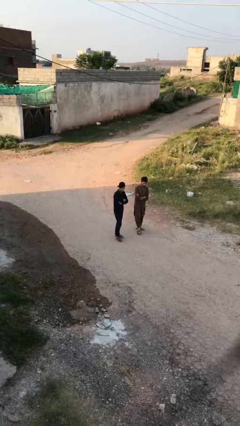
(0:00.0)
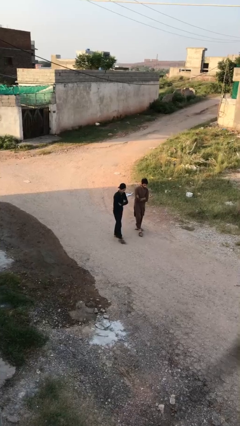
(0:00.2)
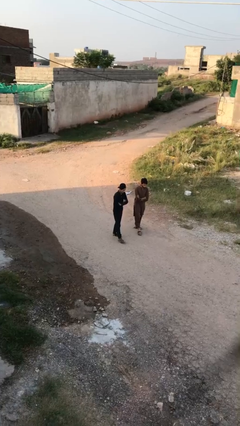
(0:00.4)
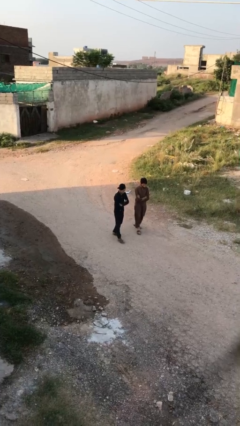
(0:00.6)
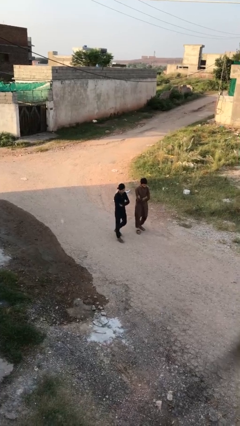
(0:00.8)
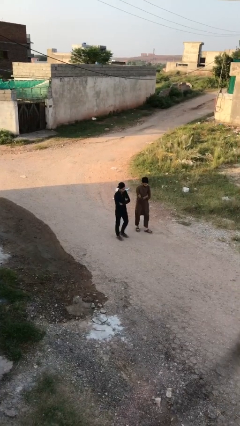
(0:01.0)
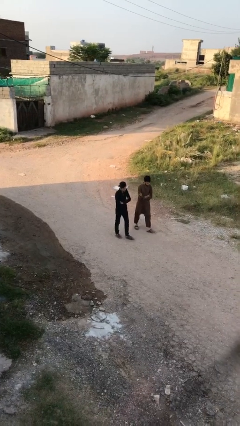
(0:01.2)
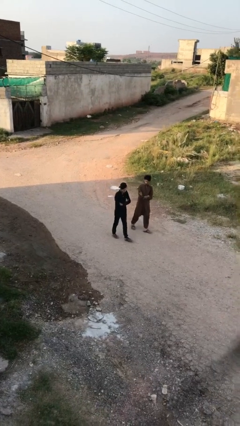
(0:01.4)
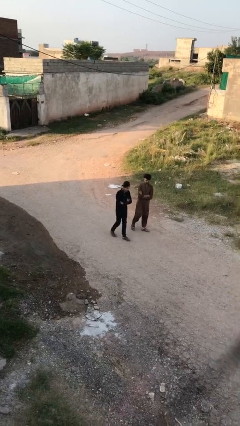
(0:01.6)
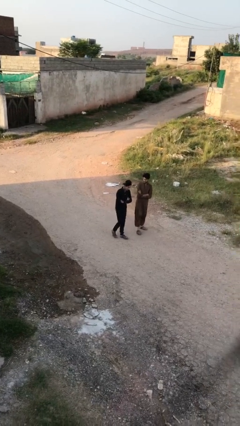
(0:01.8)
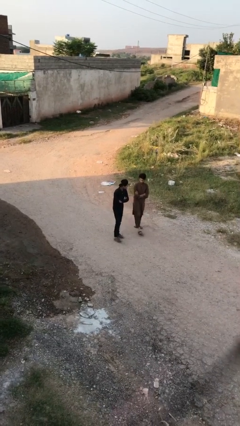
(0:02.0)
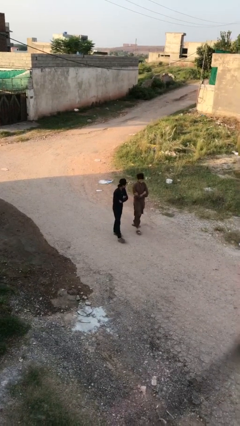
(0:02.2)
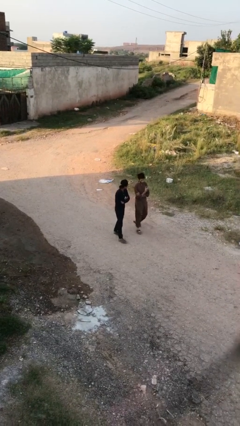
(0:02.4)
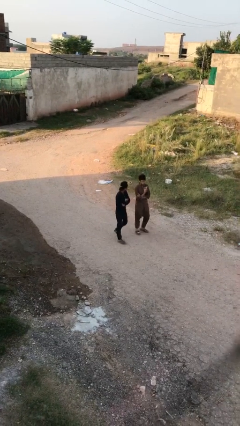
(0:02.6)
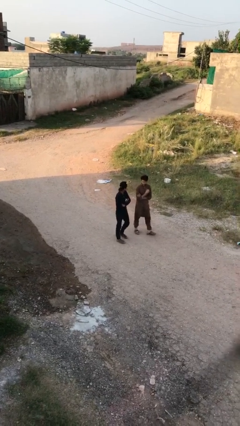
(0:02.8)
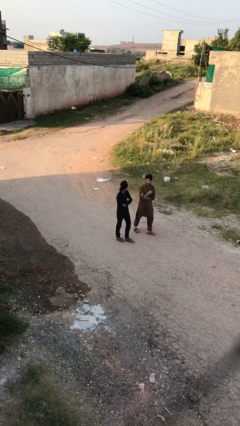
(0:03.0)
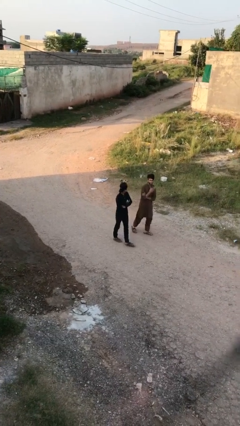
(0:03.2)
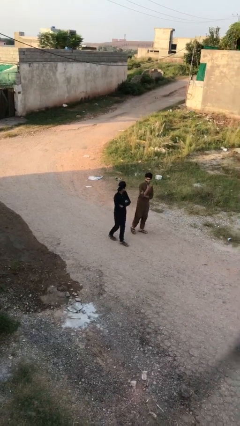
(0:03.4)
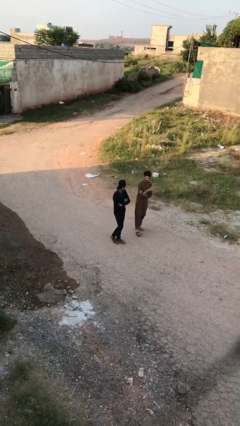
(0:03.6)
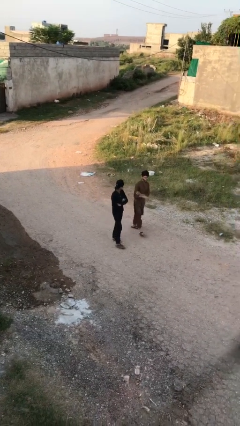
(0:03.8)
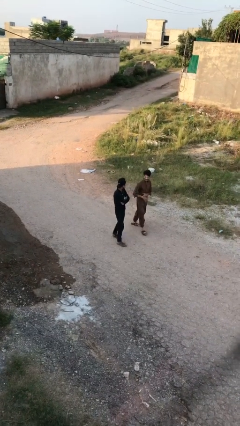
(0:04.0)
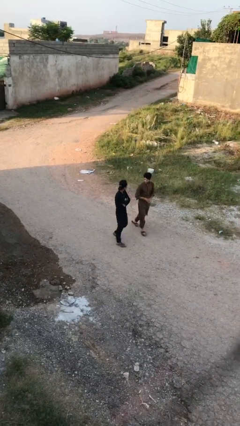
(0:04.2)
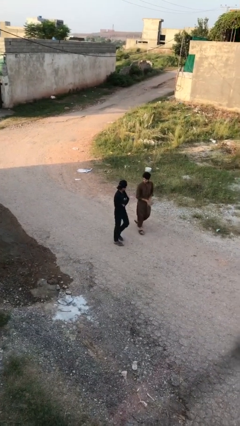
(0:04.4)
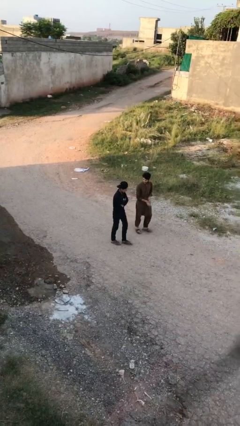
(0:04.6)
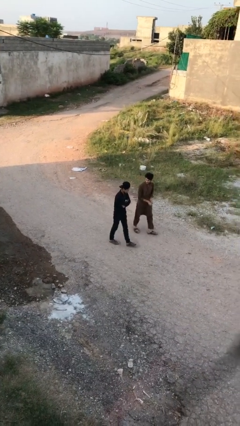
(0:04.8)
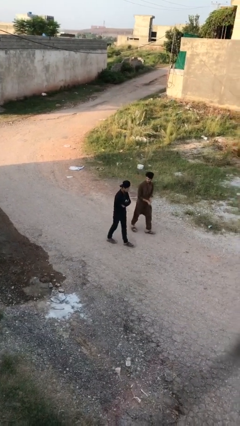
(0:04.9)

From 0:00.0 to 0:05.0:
person talks to person

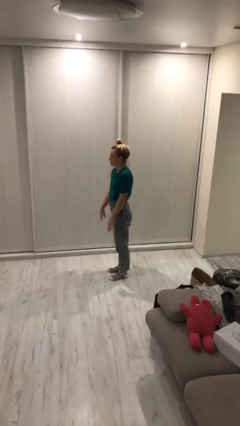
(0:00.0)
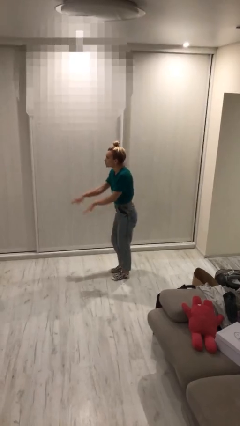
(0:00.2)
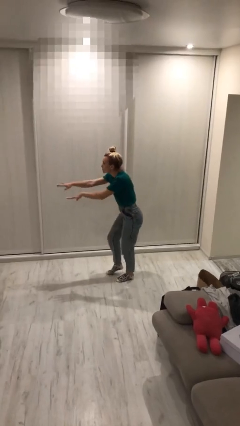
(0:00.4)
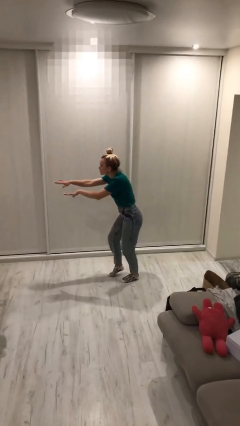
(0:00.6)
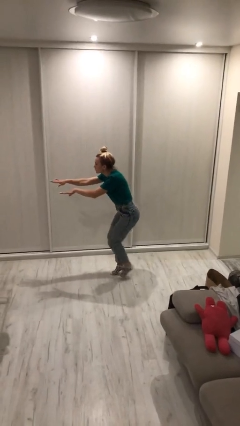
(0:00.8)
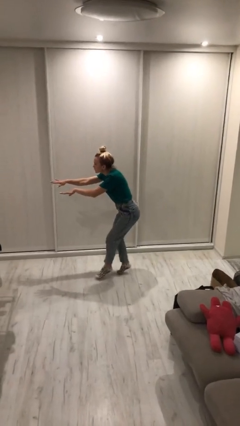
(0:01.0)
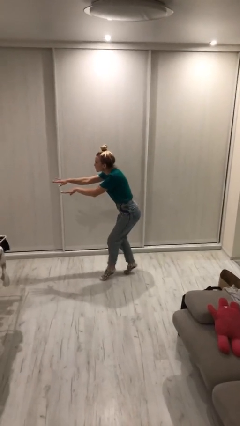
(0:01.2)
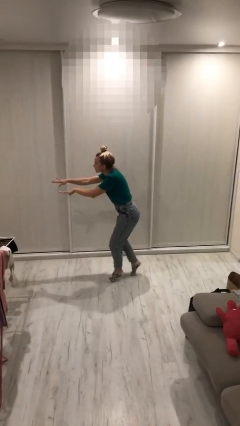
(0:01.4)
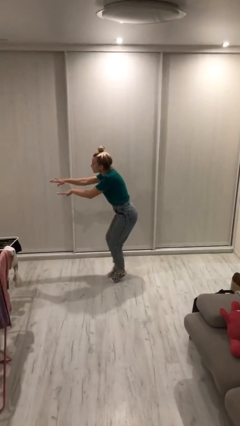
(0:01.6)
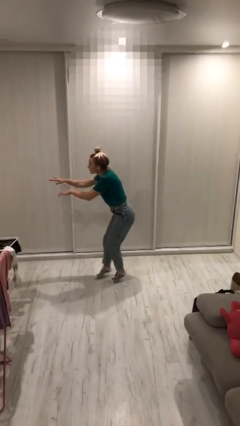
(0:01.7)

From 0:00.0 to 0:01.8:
person walks tiptoe

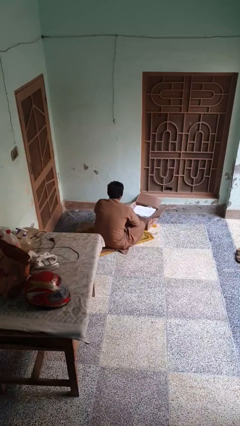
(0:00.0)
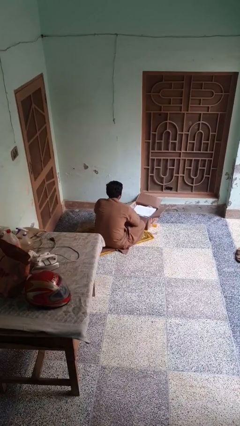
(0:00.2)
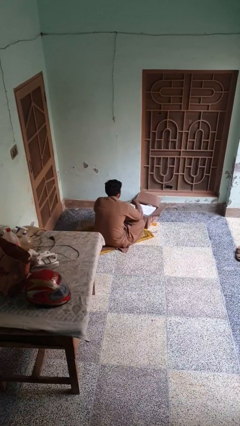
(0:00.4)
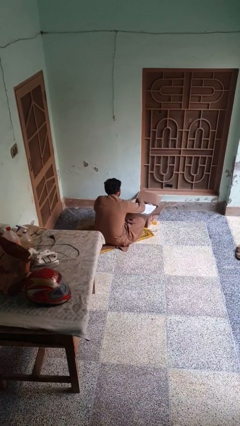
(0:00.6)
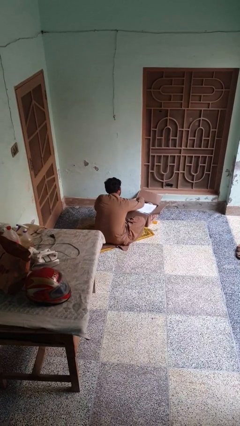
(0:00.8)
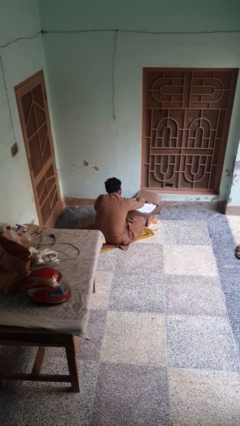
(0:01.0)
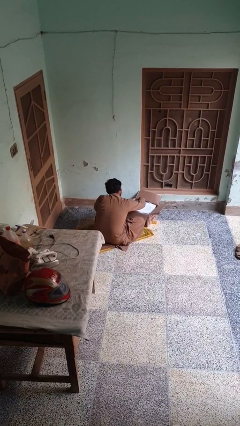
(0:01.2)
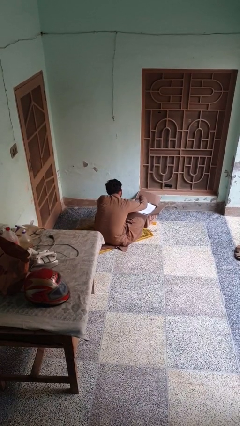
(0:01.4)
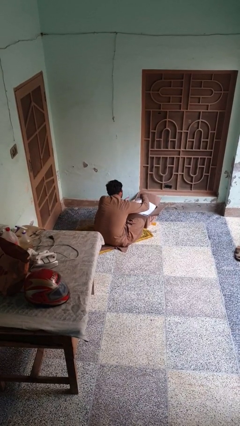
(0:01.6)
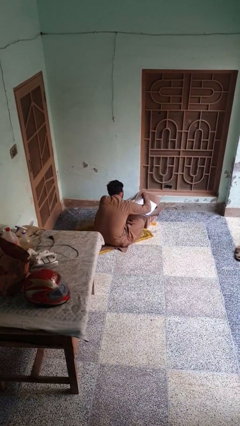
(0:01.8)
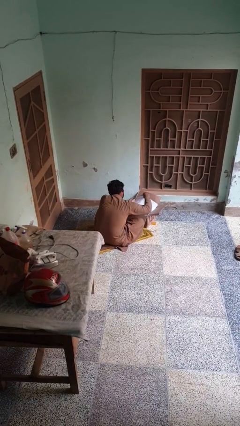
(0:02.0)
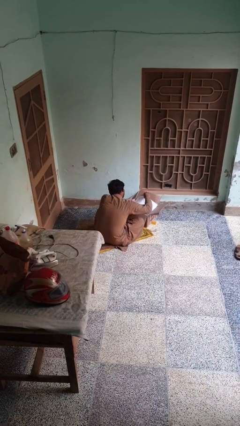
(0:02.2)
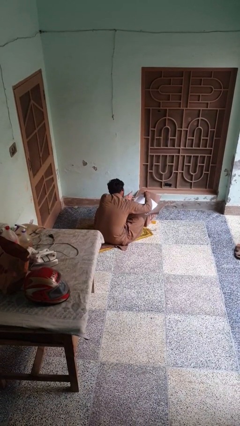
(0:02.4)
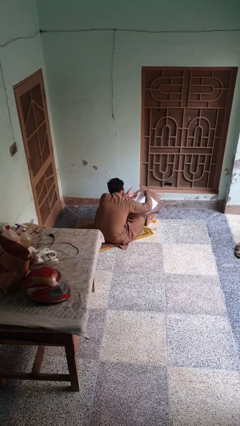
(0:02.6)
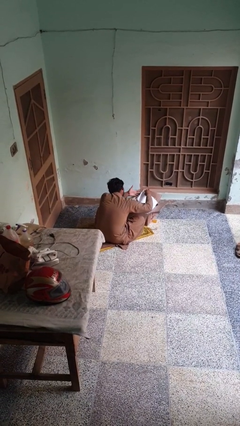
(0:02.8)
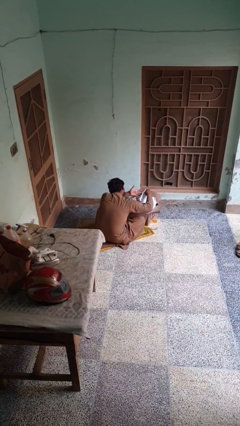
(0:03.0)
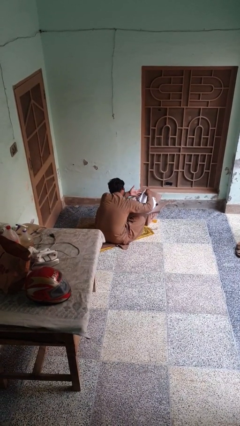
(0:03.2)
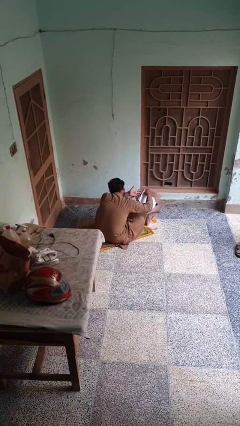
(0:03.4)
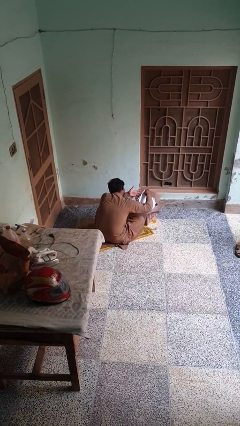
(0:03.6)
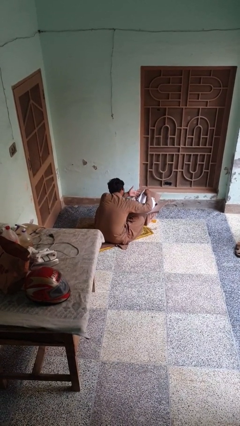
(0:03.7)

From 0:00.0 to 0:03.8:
person searches in box

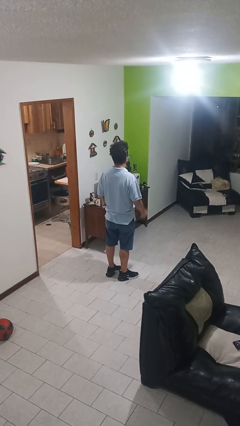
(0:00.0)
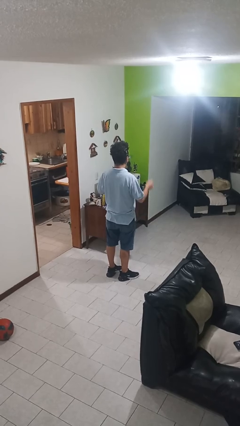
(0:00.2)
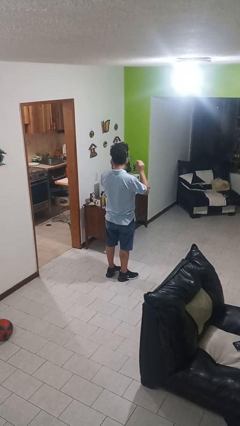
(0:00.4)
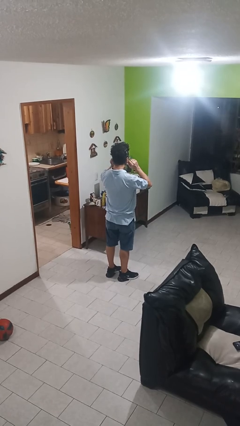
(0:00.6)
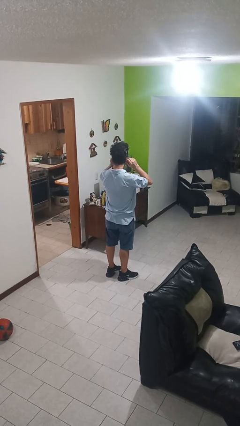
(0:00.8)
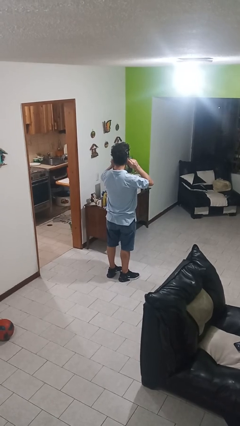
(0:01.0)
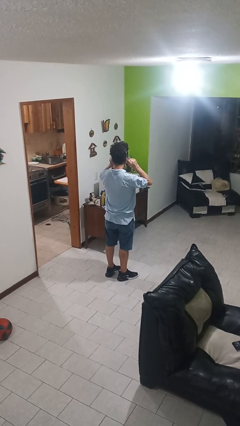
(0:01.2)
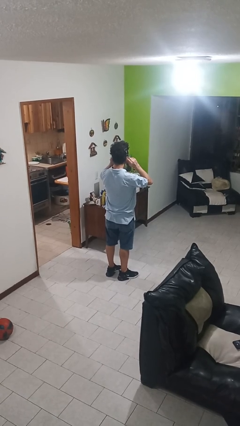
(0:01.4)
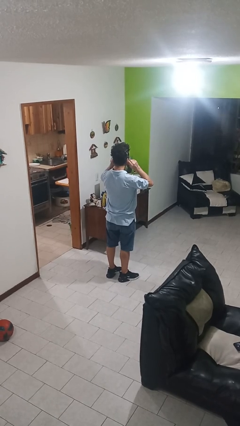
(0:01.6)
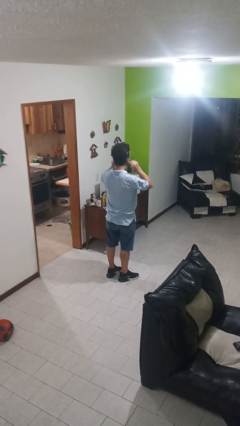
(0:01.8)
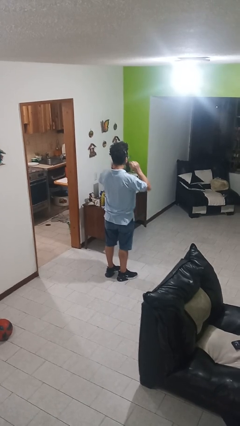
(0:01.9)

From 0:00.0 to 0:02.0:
person touches earlobe

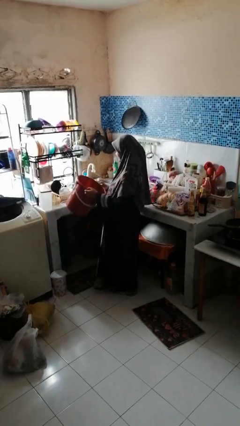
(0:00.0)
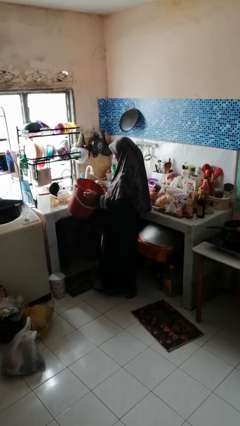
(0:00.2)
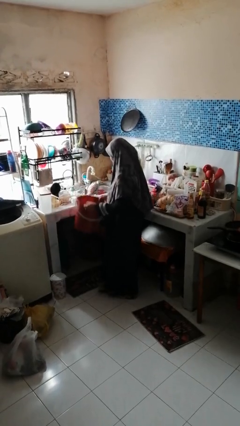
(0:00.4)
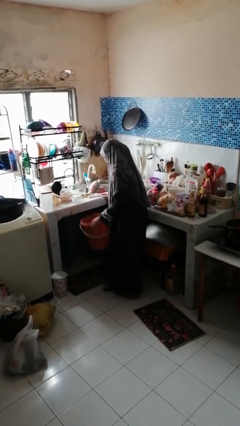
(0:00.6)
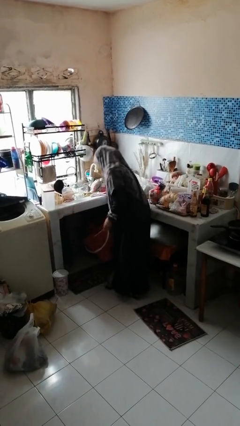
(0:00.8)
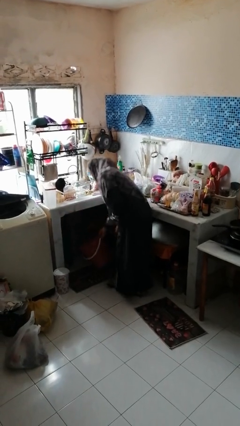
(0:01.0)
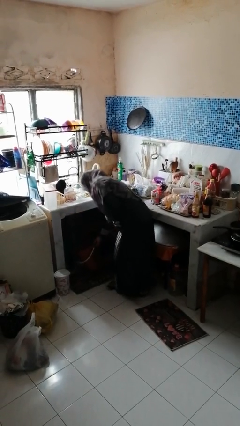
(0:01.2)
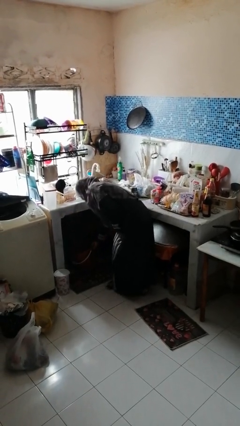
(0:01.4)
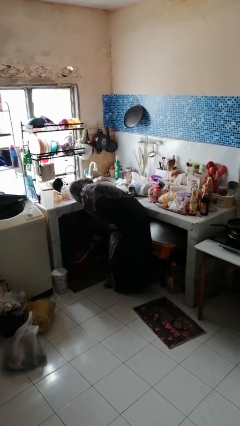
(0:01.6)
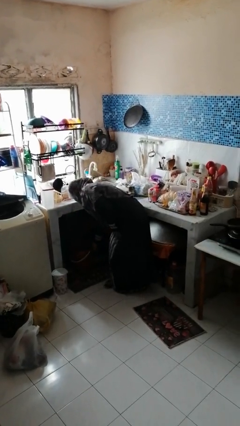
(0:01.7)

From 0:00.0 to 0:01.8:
person puts down object into cabinet

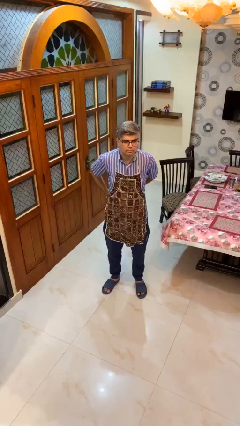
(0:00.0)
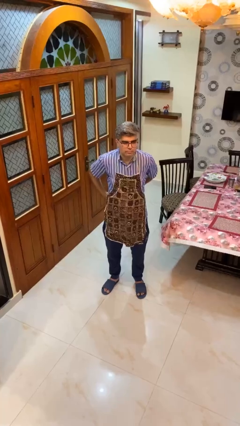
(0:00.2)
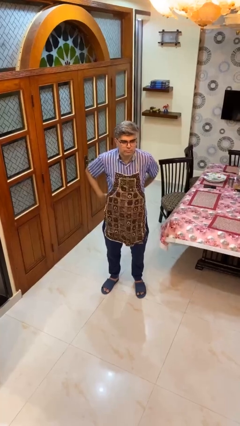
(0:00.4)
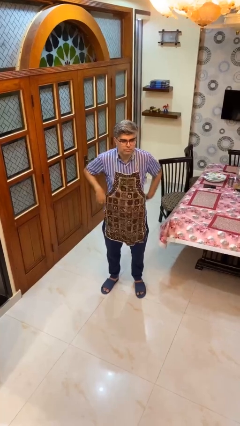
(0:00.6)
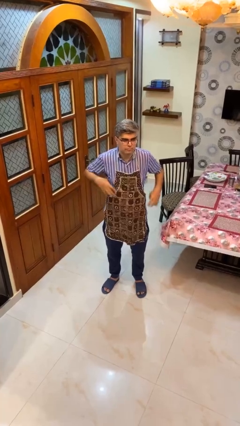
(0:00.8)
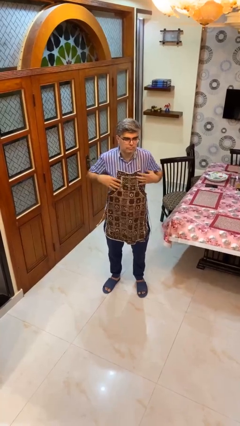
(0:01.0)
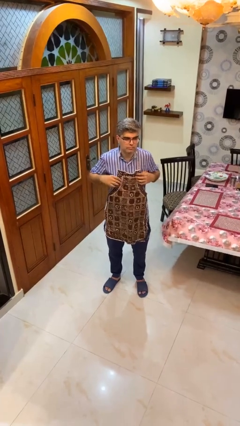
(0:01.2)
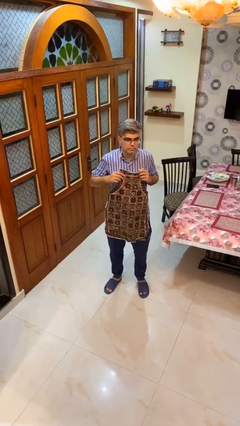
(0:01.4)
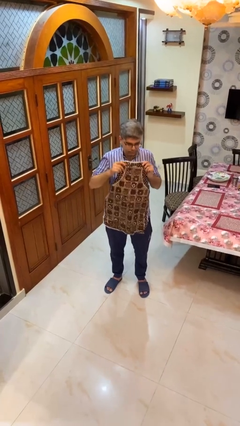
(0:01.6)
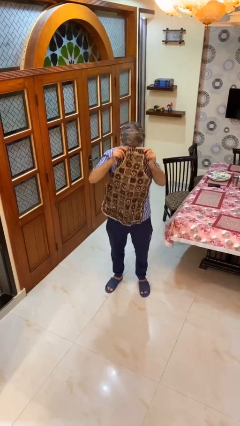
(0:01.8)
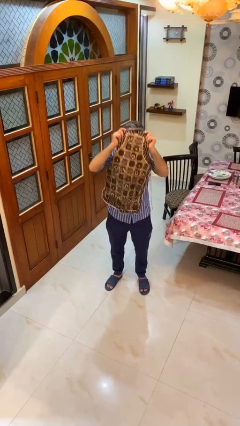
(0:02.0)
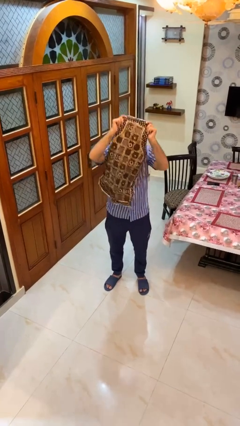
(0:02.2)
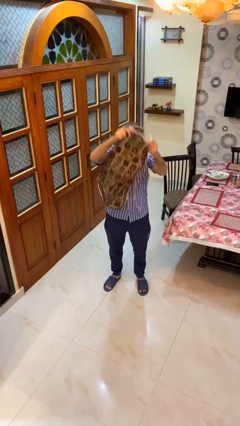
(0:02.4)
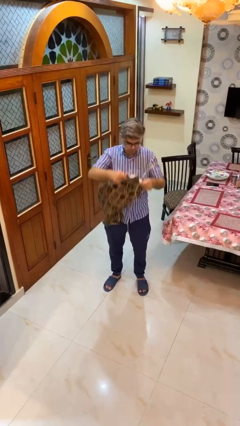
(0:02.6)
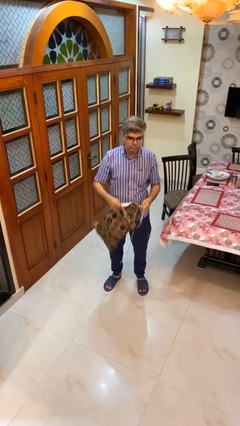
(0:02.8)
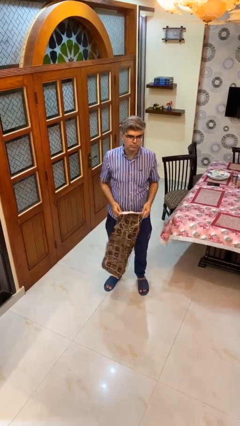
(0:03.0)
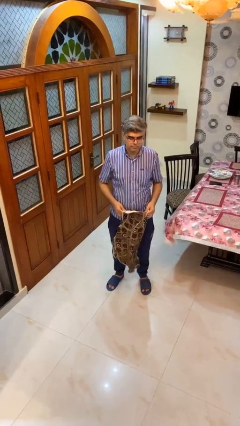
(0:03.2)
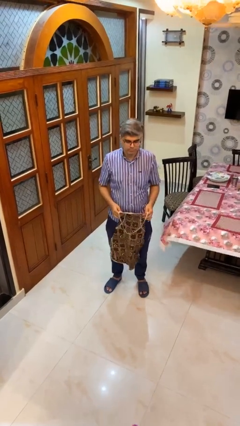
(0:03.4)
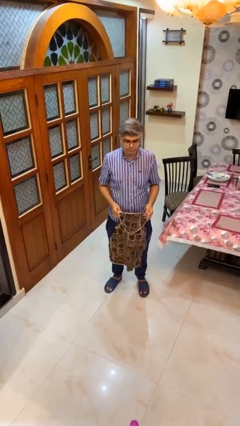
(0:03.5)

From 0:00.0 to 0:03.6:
person takes off apron
